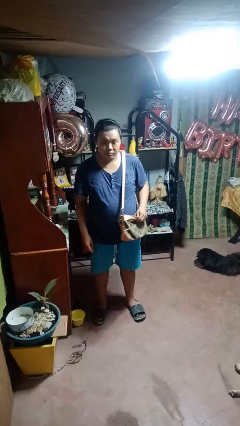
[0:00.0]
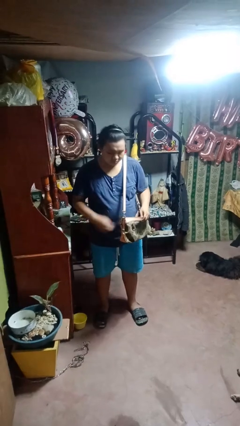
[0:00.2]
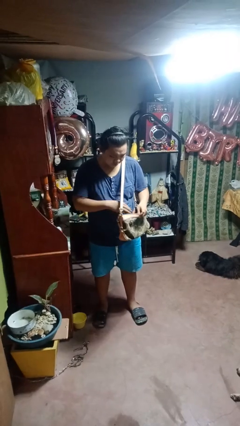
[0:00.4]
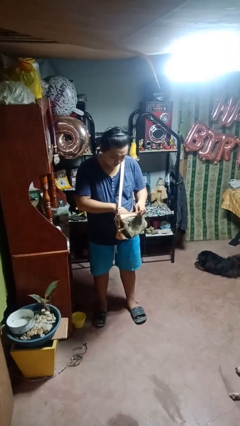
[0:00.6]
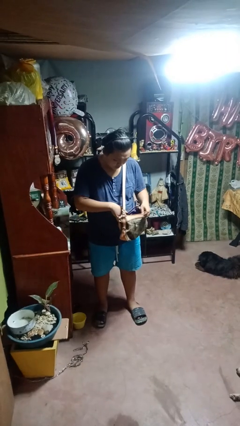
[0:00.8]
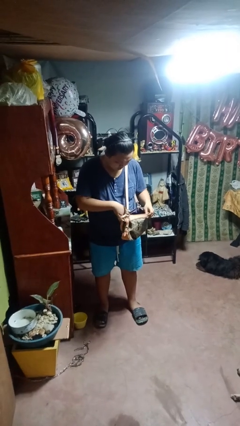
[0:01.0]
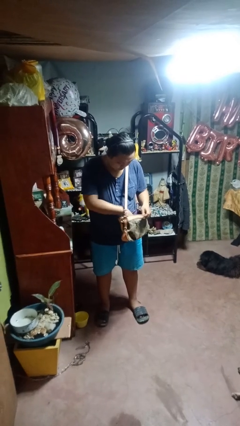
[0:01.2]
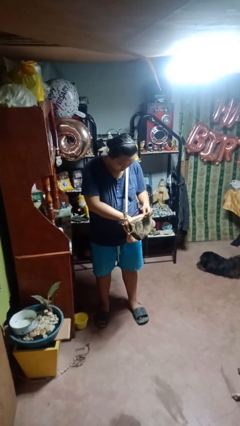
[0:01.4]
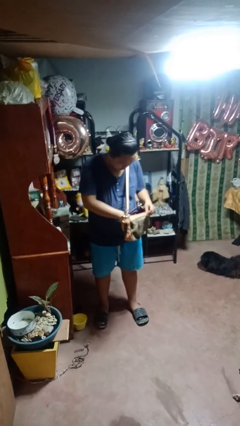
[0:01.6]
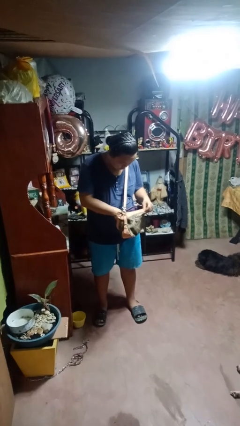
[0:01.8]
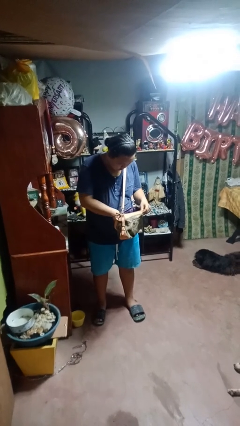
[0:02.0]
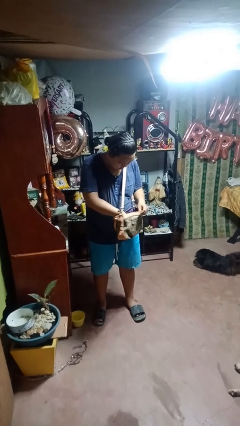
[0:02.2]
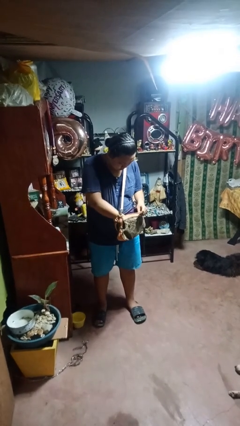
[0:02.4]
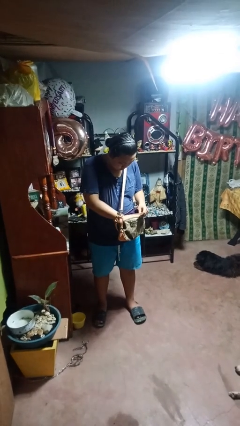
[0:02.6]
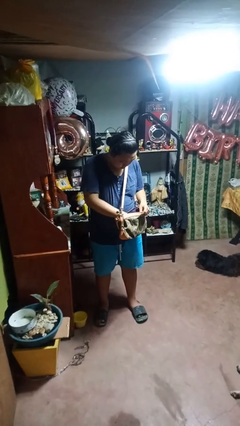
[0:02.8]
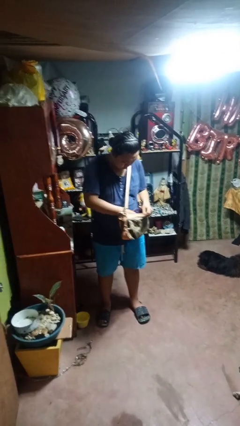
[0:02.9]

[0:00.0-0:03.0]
person searches in purse

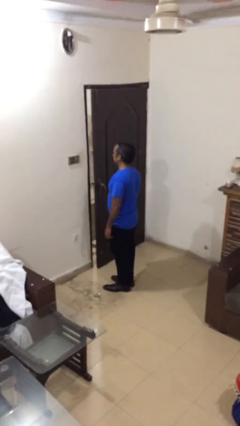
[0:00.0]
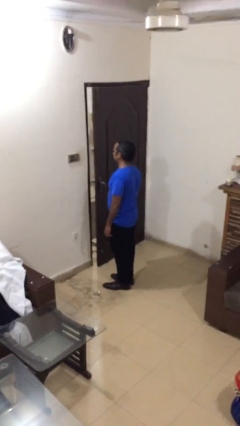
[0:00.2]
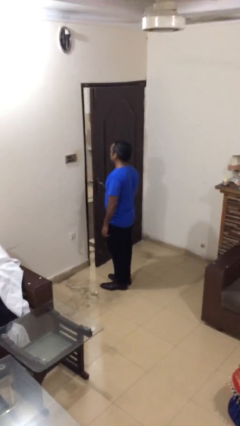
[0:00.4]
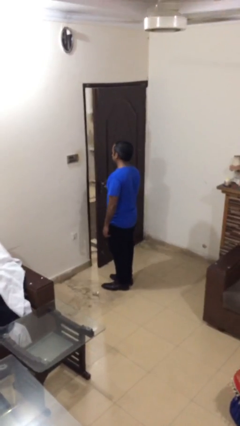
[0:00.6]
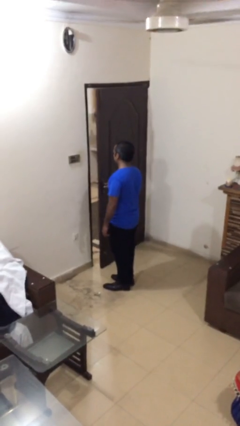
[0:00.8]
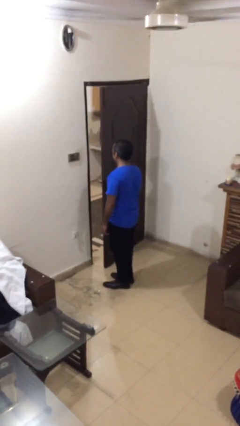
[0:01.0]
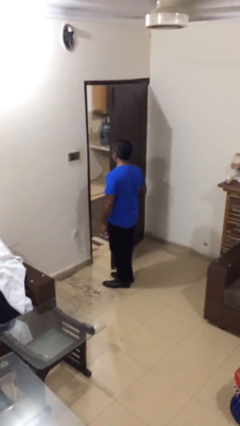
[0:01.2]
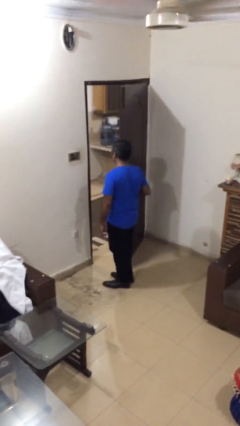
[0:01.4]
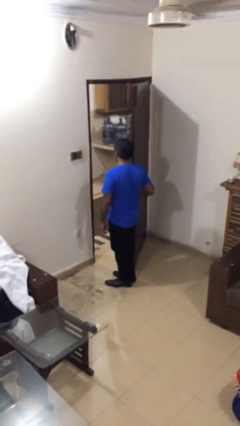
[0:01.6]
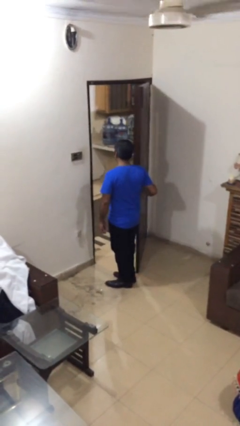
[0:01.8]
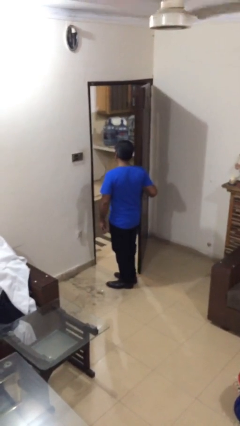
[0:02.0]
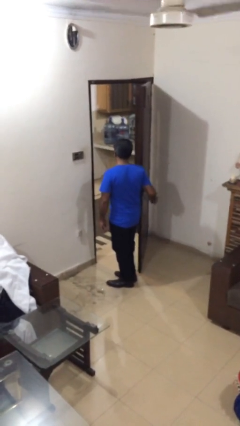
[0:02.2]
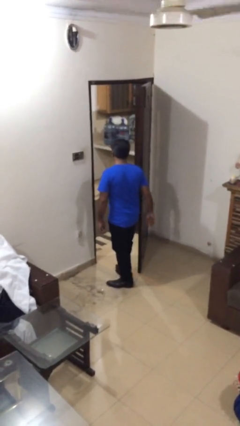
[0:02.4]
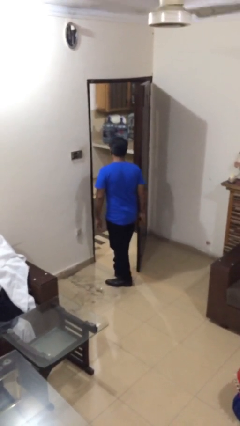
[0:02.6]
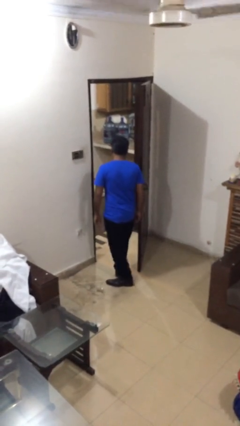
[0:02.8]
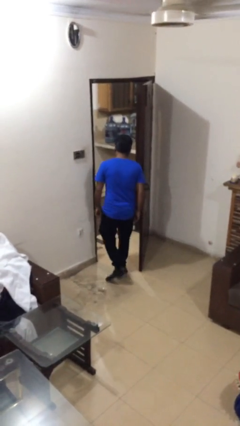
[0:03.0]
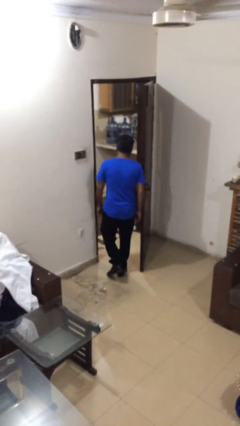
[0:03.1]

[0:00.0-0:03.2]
person opens facility door

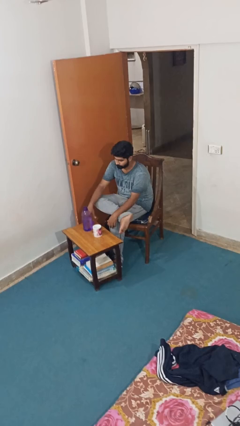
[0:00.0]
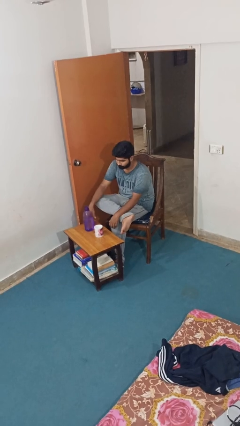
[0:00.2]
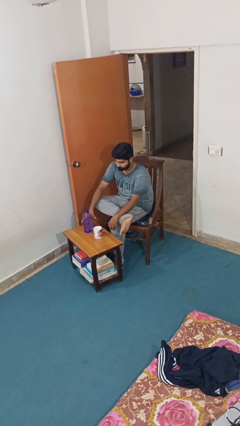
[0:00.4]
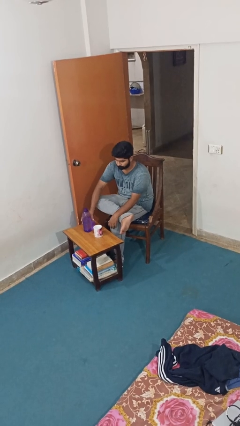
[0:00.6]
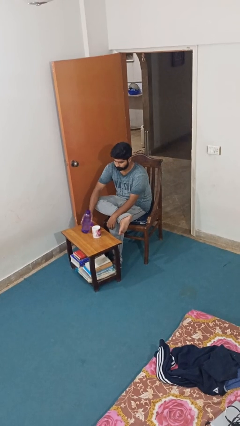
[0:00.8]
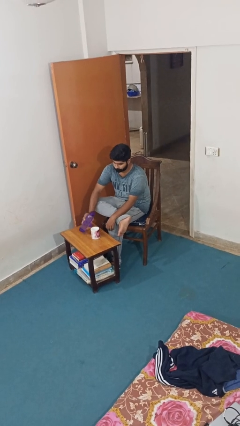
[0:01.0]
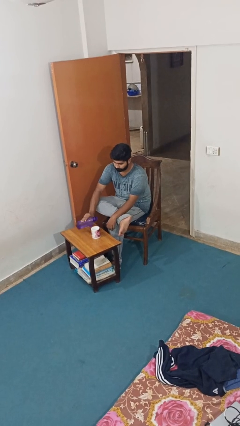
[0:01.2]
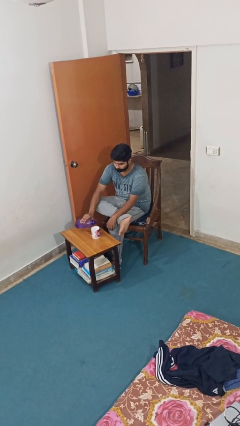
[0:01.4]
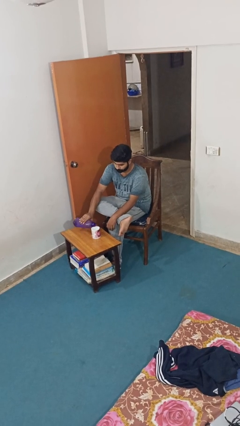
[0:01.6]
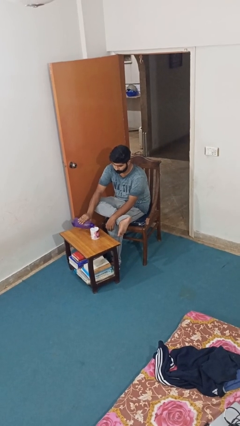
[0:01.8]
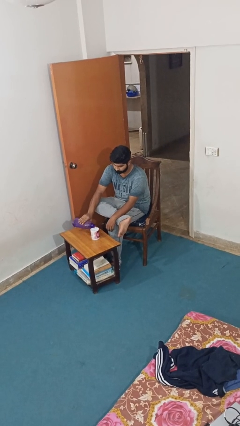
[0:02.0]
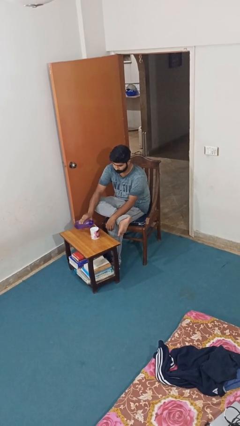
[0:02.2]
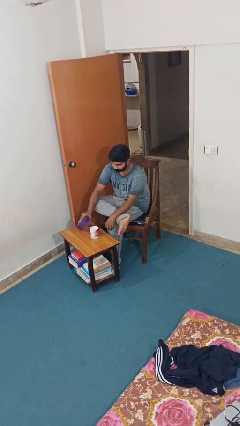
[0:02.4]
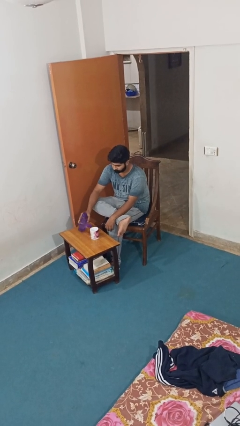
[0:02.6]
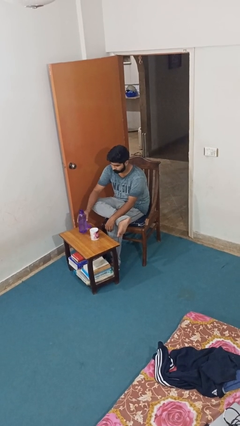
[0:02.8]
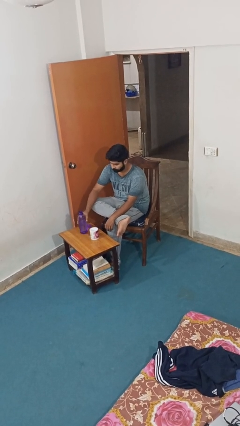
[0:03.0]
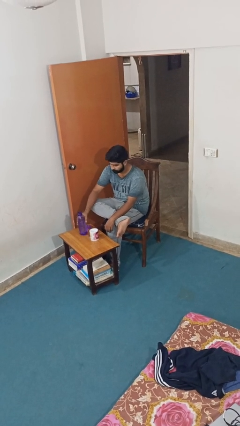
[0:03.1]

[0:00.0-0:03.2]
person pours liquid into cup

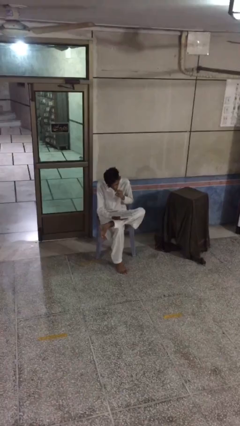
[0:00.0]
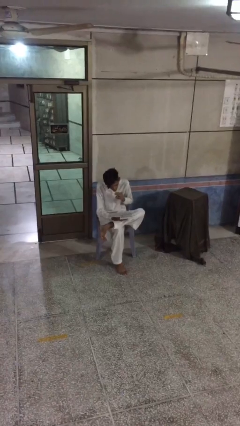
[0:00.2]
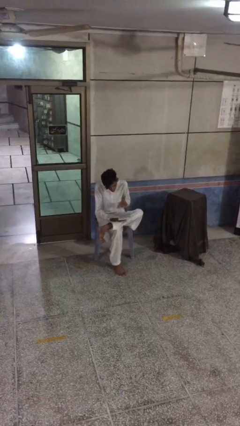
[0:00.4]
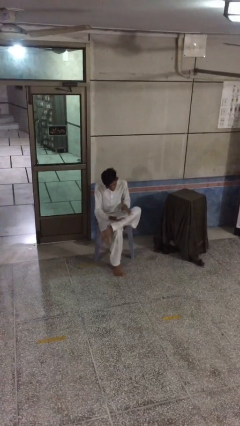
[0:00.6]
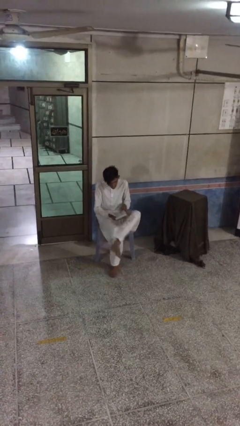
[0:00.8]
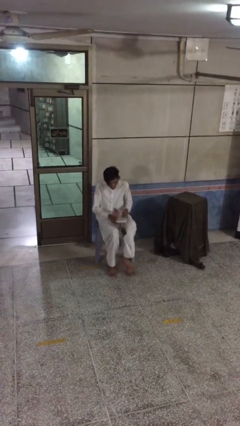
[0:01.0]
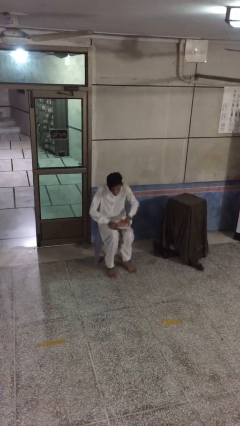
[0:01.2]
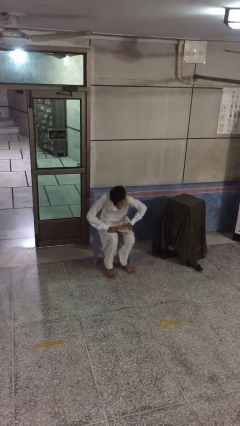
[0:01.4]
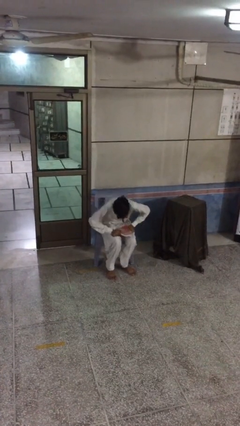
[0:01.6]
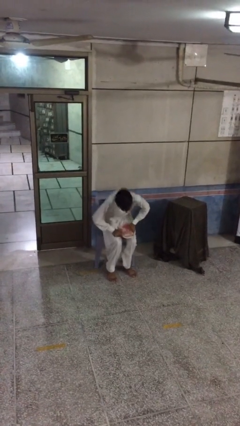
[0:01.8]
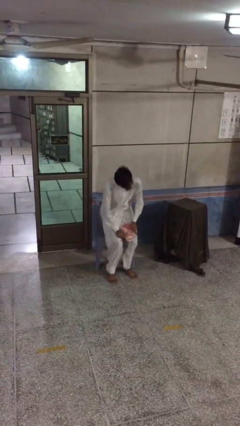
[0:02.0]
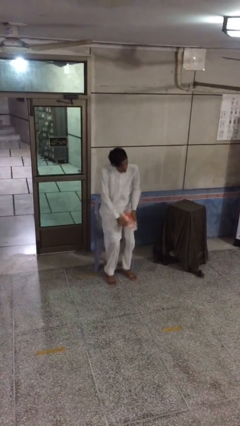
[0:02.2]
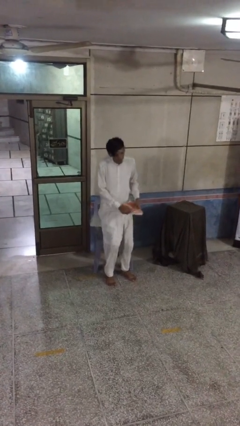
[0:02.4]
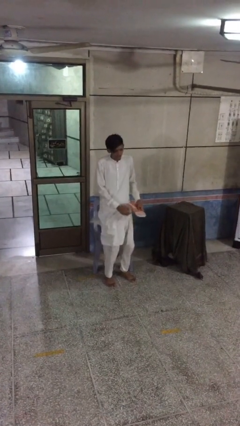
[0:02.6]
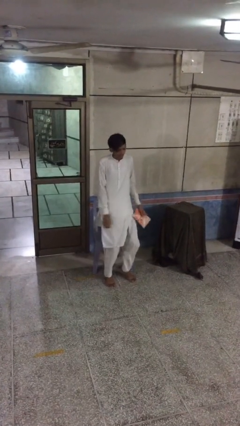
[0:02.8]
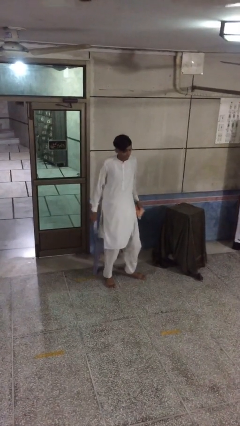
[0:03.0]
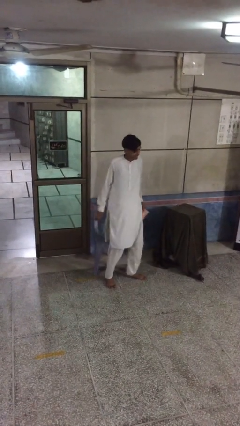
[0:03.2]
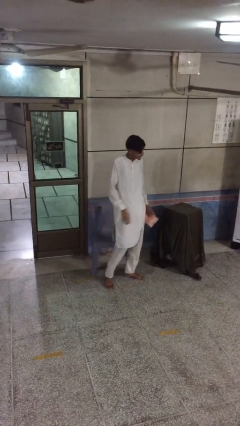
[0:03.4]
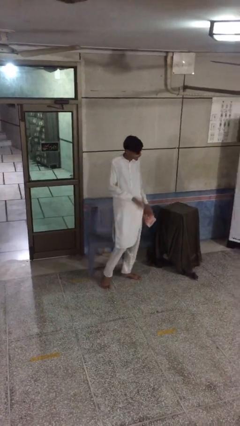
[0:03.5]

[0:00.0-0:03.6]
person stands up

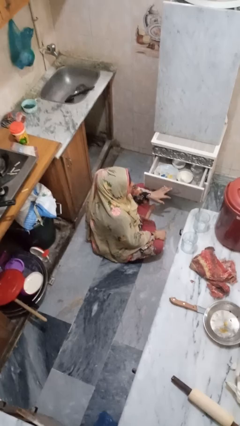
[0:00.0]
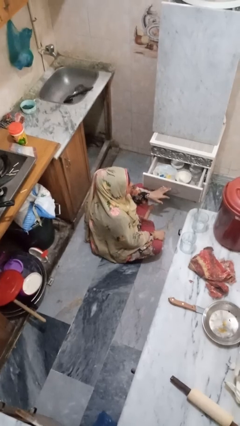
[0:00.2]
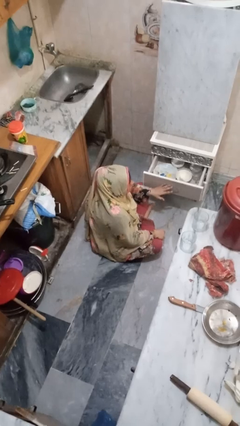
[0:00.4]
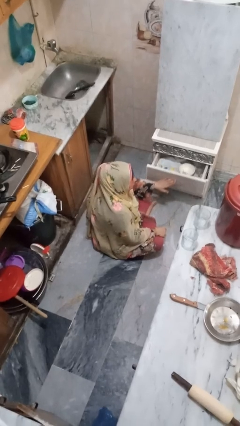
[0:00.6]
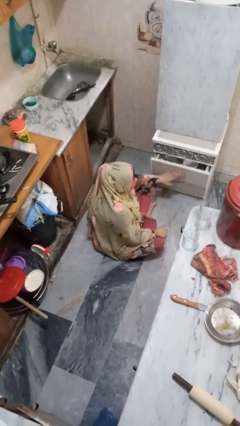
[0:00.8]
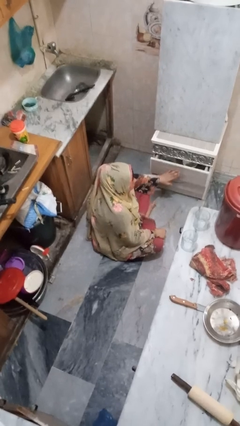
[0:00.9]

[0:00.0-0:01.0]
person closes kitchen drawer

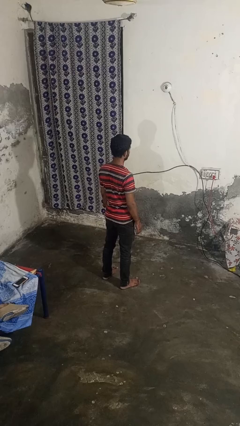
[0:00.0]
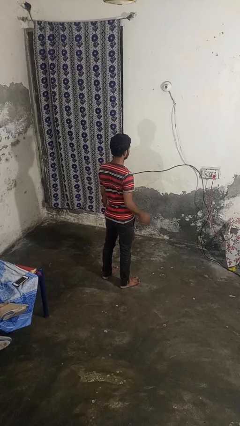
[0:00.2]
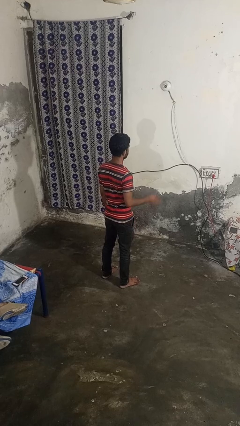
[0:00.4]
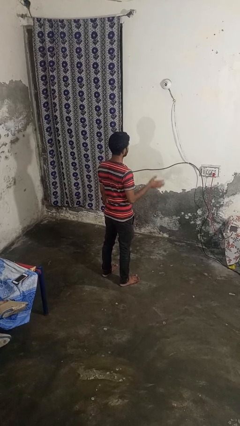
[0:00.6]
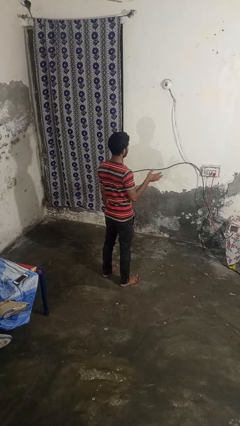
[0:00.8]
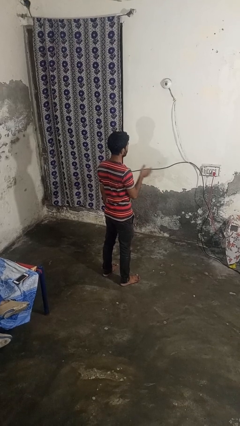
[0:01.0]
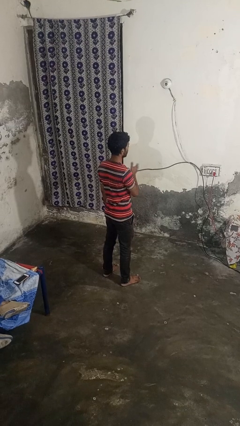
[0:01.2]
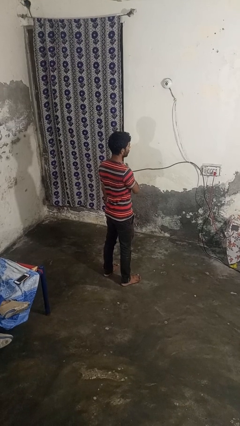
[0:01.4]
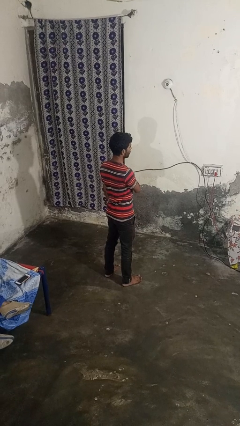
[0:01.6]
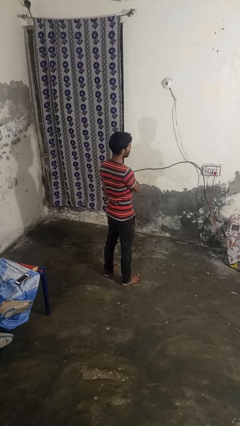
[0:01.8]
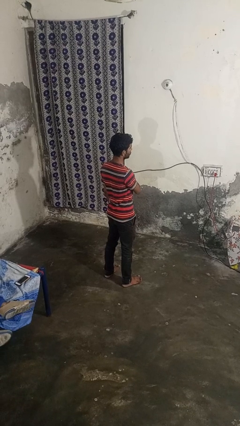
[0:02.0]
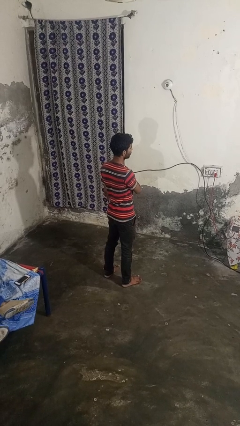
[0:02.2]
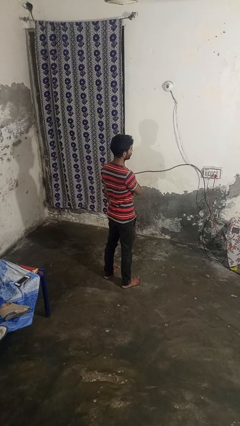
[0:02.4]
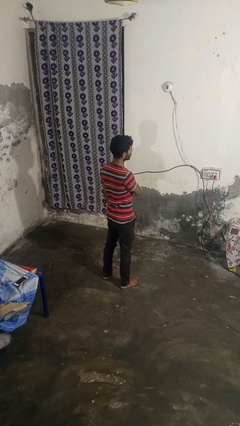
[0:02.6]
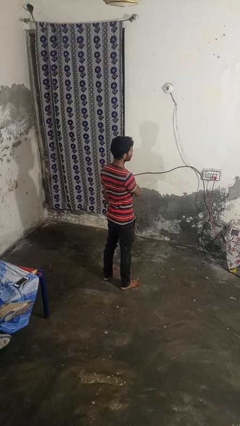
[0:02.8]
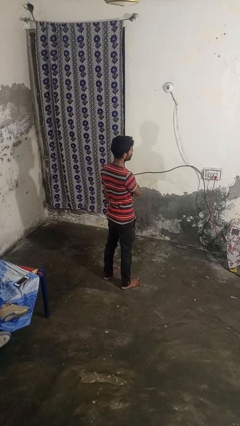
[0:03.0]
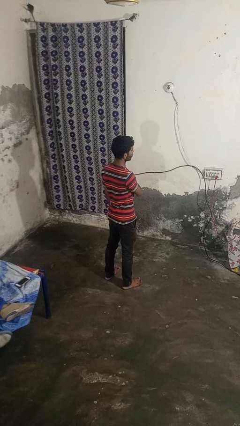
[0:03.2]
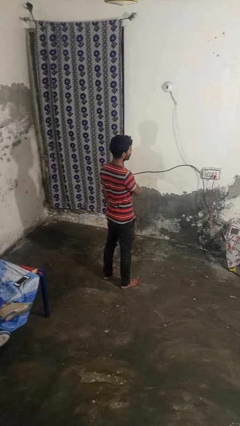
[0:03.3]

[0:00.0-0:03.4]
person gestures swipe left

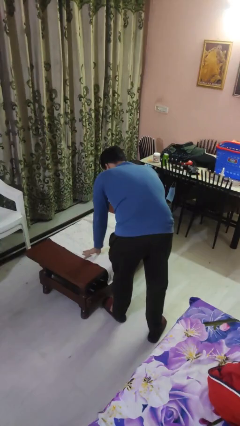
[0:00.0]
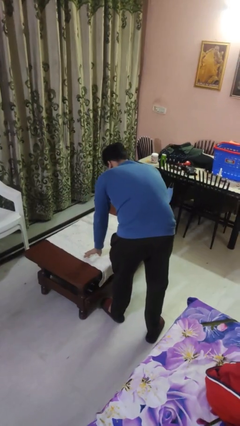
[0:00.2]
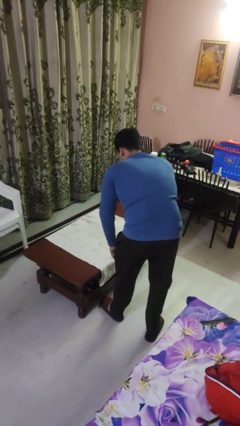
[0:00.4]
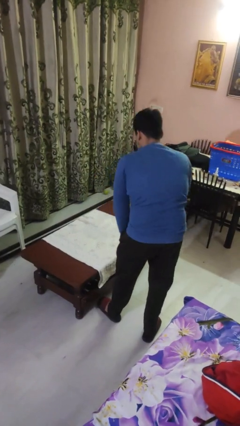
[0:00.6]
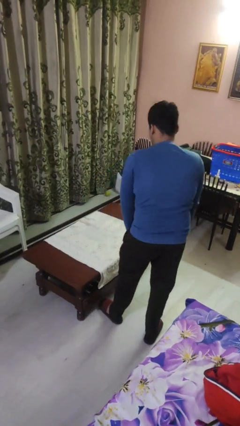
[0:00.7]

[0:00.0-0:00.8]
person spreads tablecloth
